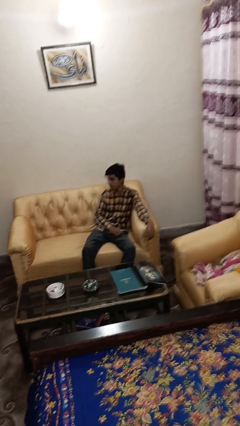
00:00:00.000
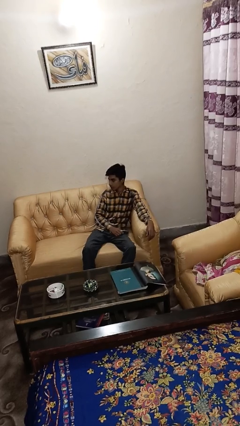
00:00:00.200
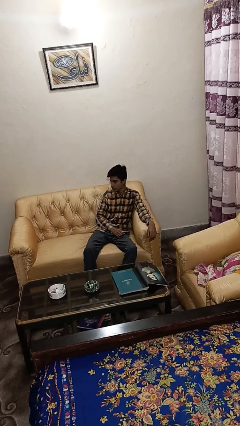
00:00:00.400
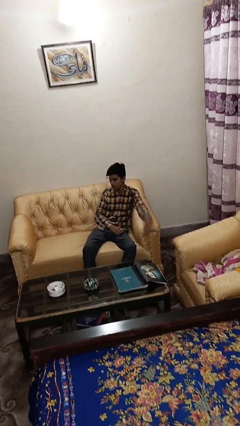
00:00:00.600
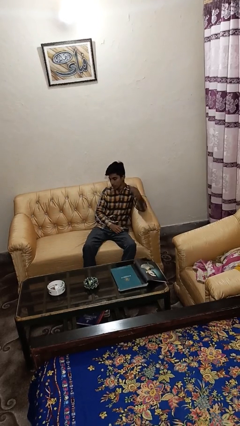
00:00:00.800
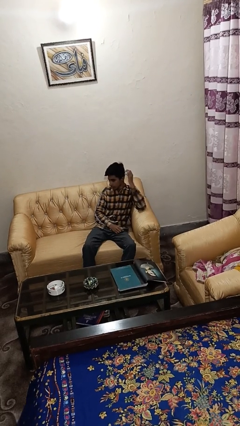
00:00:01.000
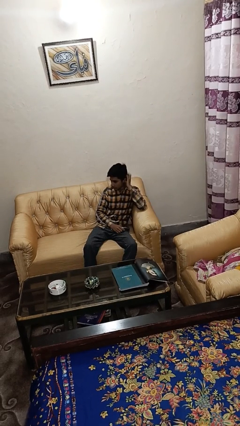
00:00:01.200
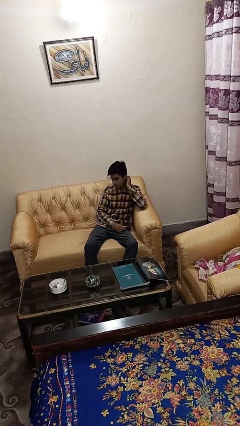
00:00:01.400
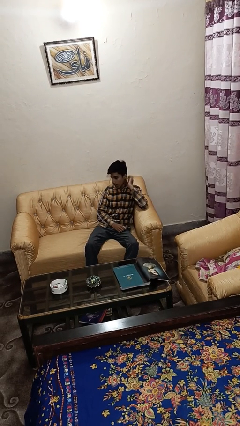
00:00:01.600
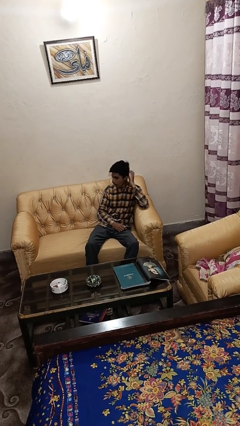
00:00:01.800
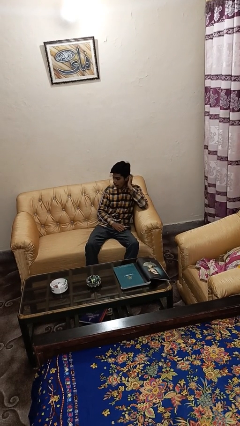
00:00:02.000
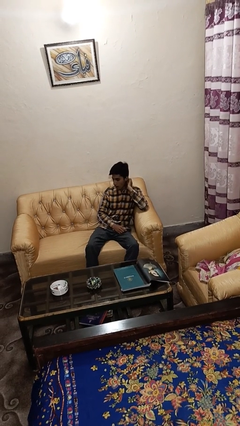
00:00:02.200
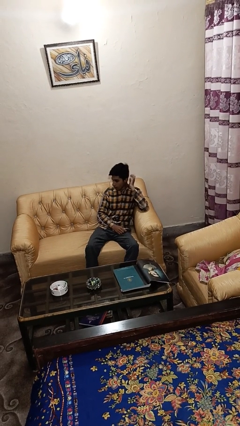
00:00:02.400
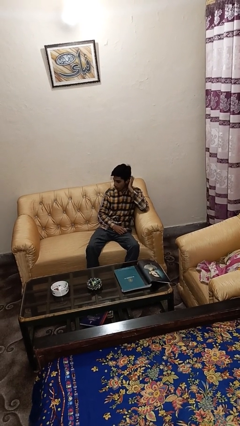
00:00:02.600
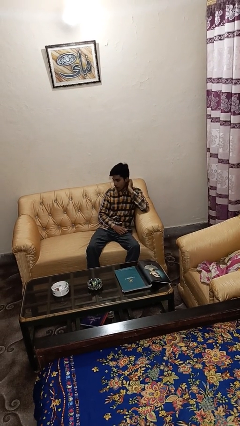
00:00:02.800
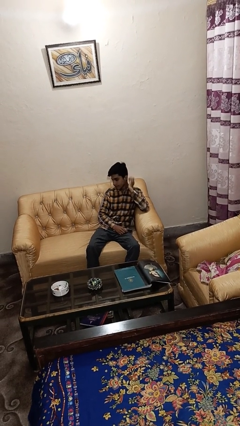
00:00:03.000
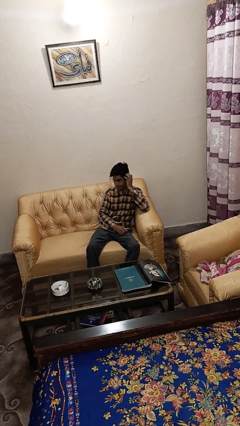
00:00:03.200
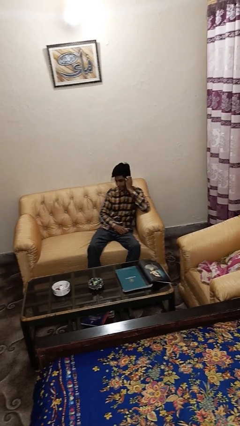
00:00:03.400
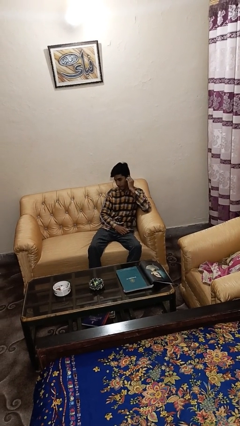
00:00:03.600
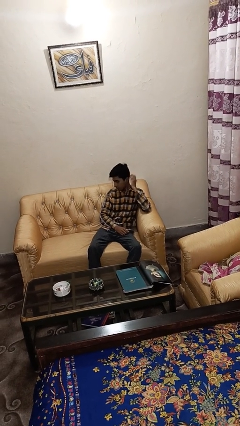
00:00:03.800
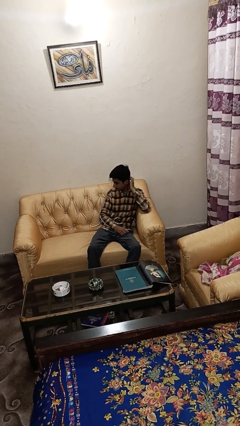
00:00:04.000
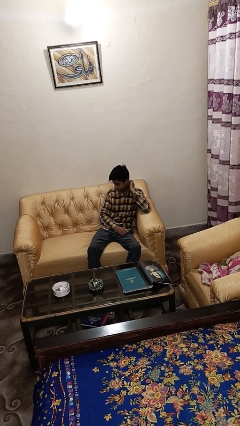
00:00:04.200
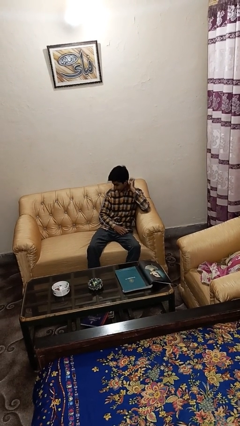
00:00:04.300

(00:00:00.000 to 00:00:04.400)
person strokes hair

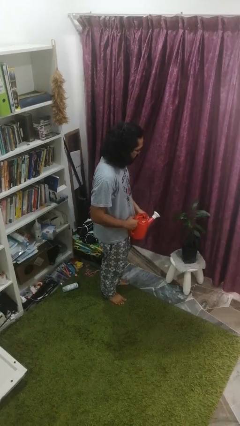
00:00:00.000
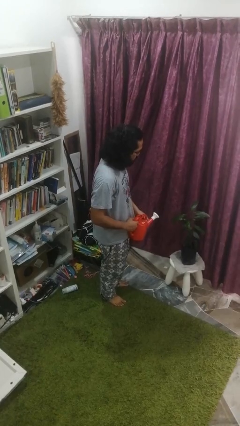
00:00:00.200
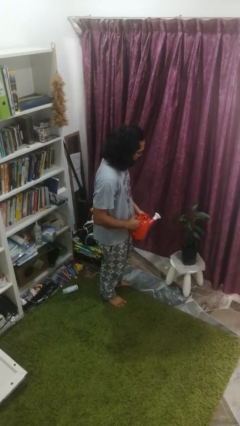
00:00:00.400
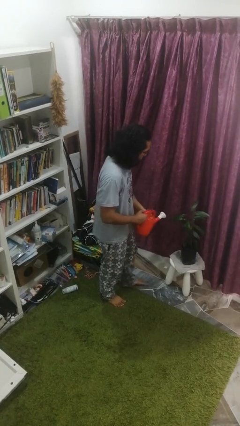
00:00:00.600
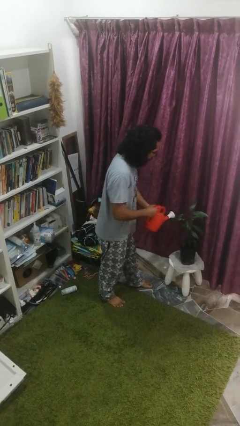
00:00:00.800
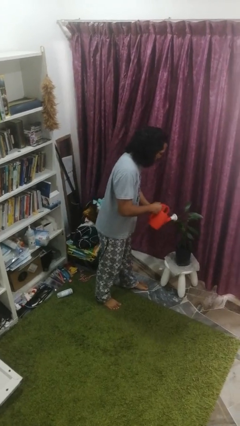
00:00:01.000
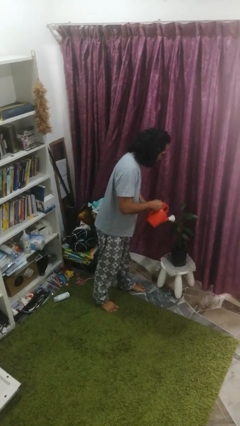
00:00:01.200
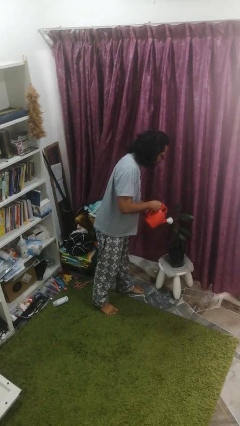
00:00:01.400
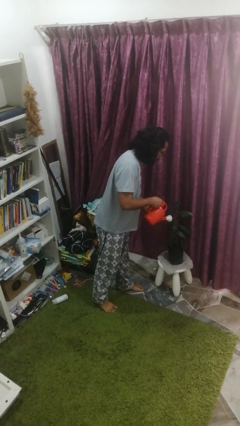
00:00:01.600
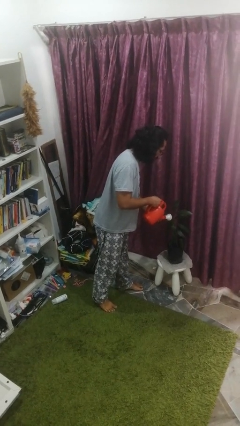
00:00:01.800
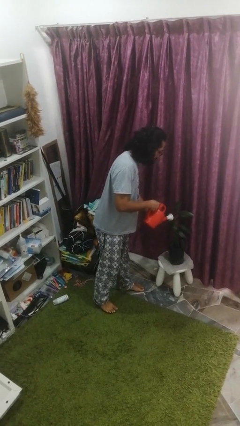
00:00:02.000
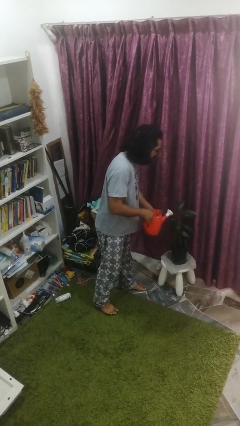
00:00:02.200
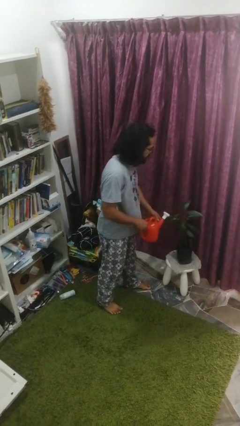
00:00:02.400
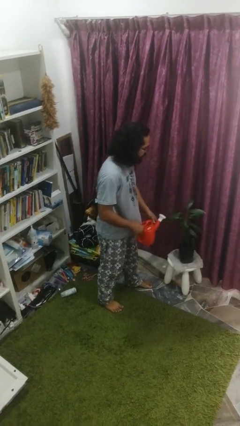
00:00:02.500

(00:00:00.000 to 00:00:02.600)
person waters houseplant

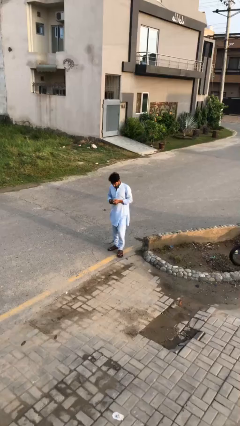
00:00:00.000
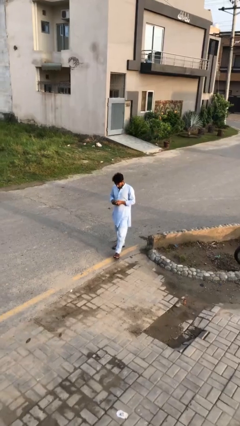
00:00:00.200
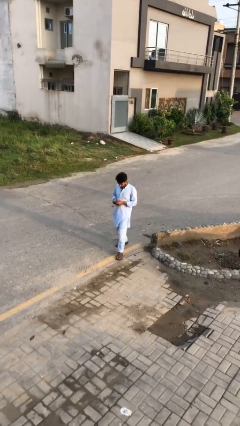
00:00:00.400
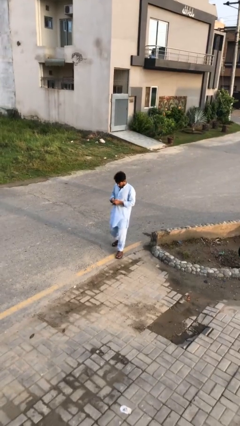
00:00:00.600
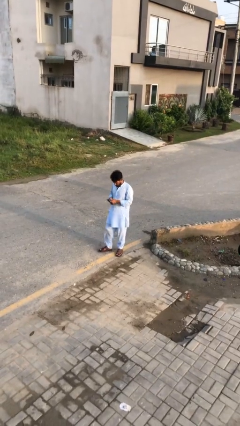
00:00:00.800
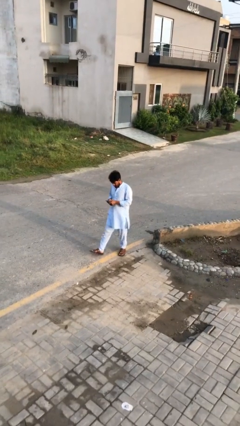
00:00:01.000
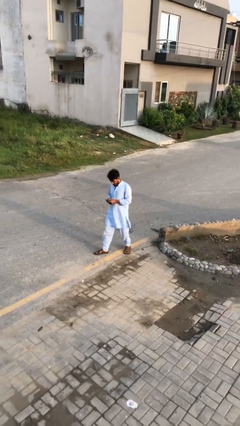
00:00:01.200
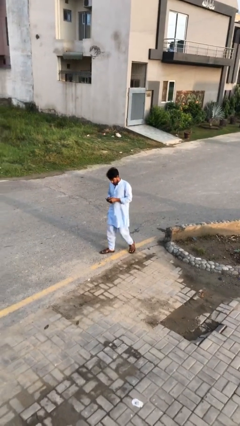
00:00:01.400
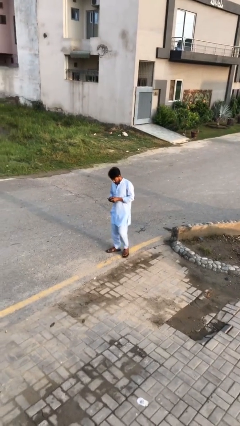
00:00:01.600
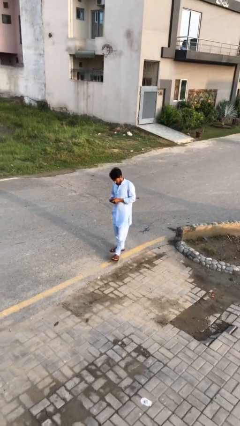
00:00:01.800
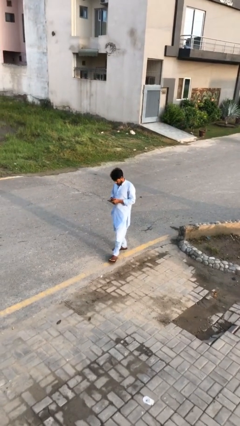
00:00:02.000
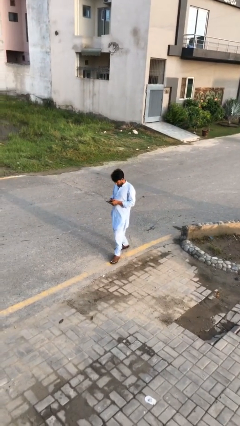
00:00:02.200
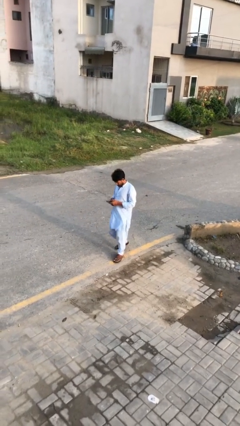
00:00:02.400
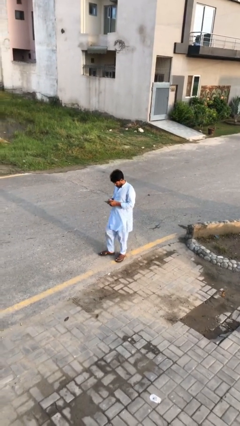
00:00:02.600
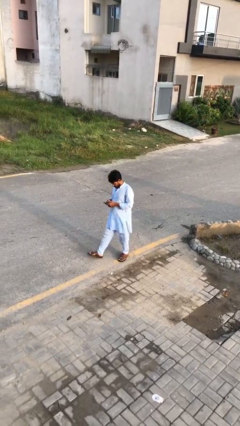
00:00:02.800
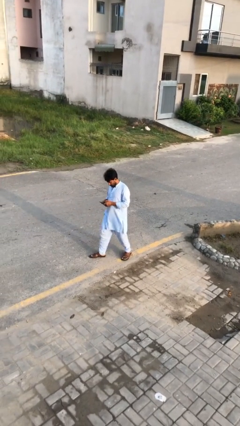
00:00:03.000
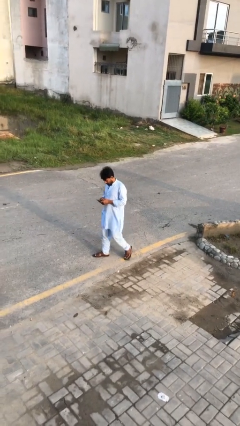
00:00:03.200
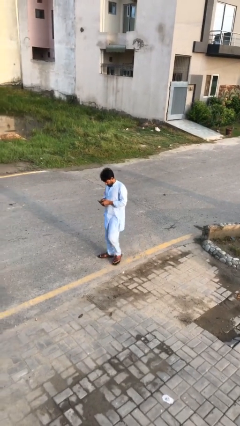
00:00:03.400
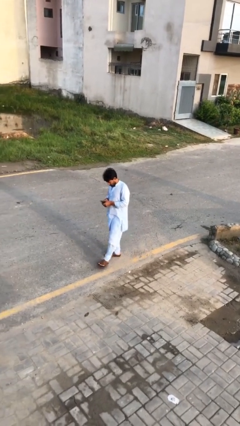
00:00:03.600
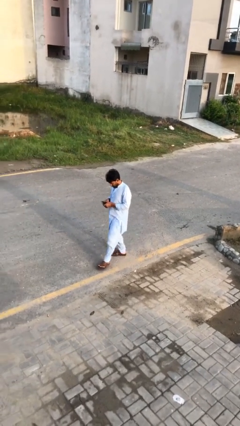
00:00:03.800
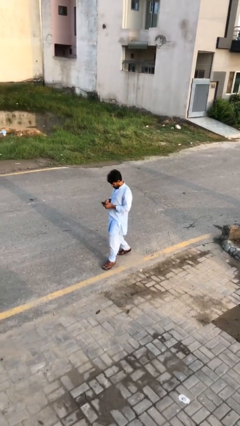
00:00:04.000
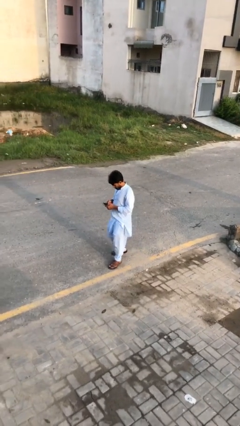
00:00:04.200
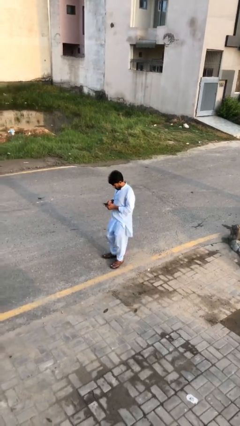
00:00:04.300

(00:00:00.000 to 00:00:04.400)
person texts on phone

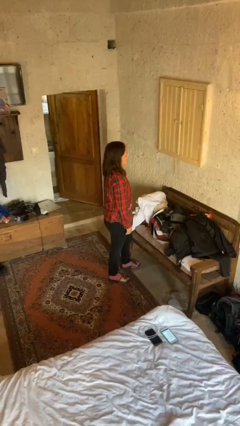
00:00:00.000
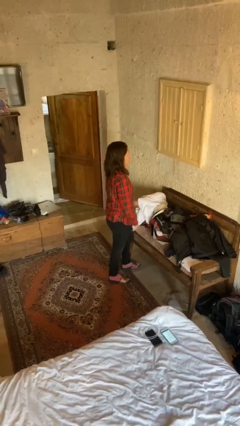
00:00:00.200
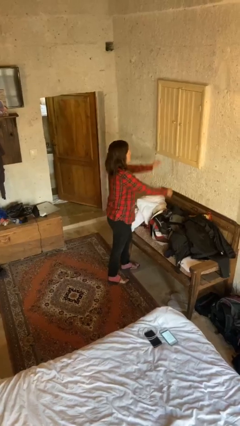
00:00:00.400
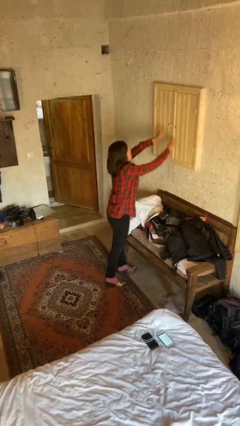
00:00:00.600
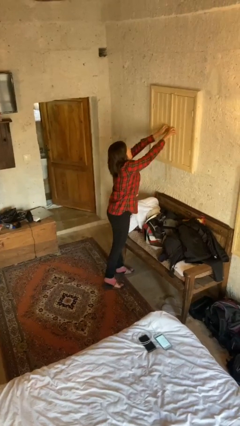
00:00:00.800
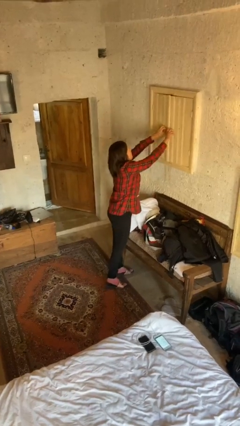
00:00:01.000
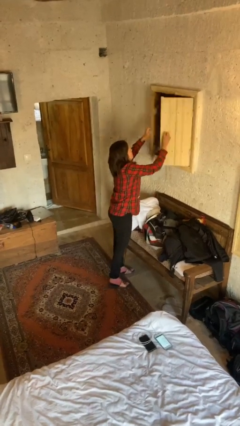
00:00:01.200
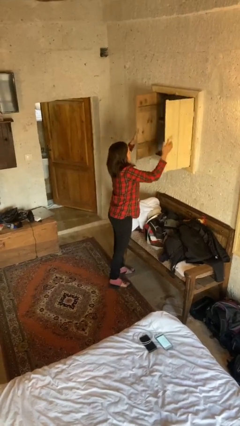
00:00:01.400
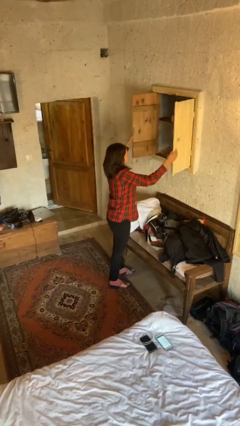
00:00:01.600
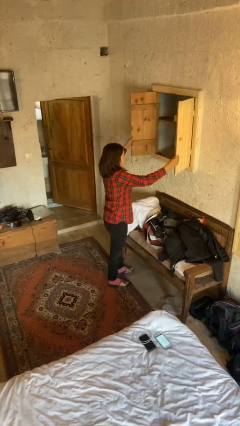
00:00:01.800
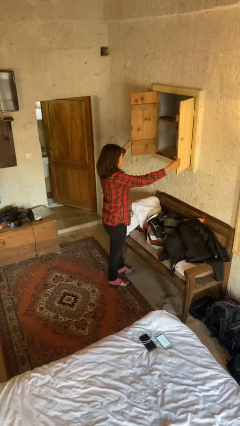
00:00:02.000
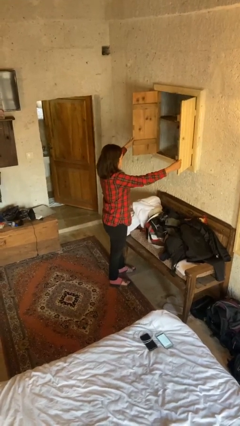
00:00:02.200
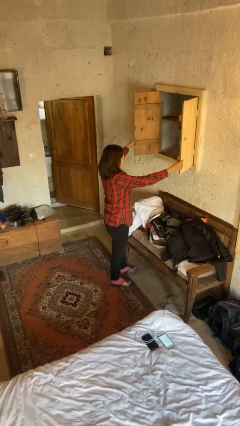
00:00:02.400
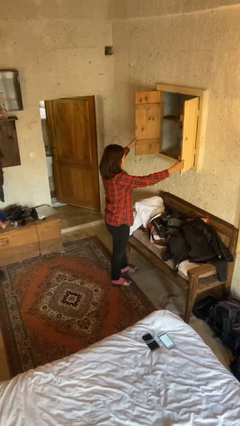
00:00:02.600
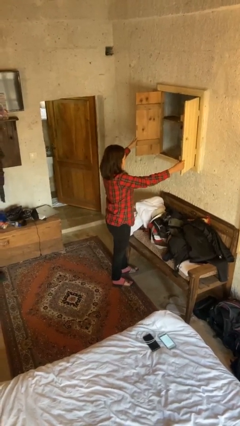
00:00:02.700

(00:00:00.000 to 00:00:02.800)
person opens closet door

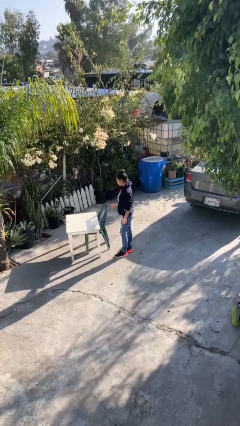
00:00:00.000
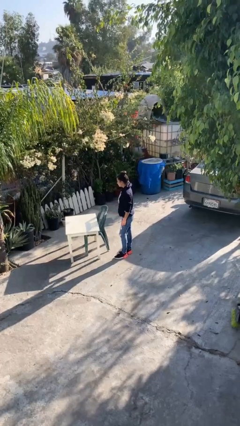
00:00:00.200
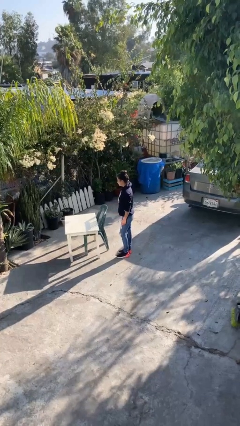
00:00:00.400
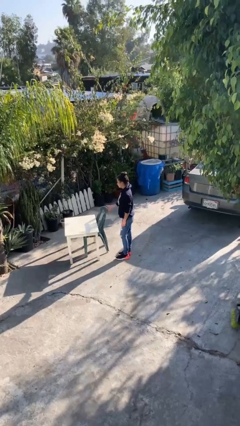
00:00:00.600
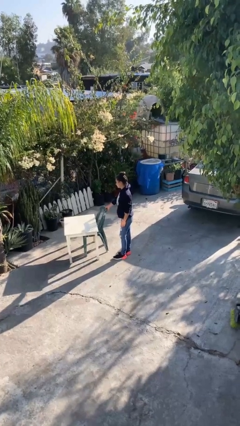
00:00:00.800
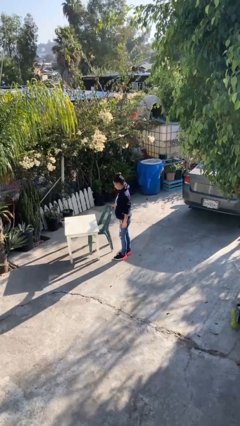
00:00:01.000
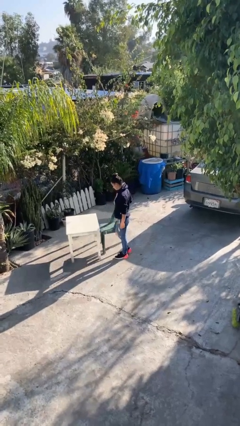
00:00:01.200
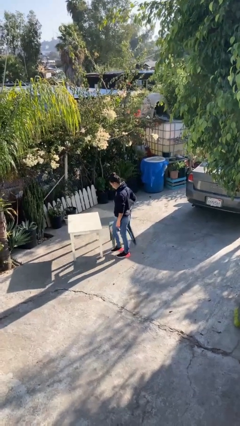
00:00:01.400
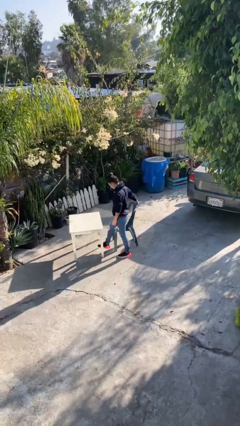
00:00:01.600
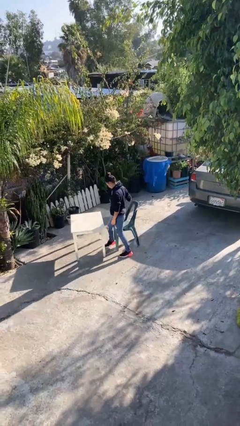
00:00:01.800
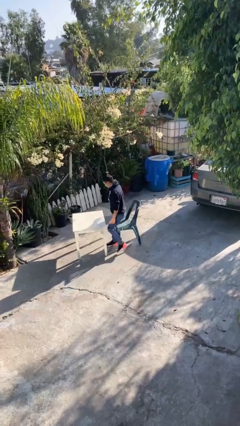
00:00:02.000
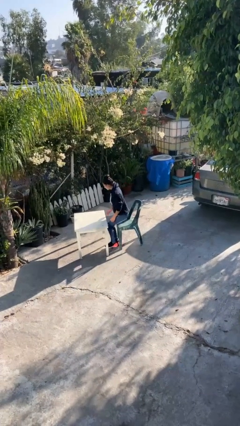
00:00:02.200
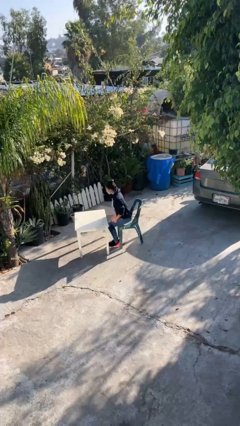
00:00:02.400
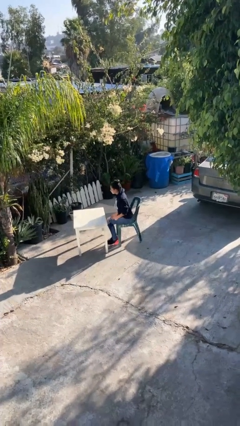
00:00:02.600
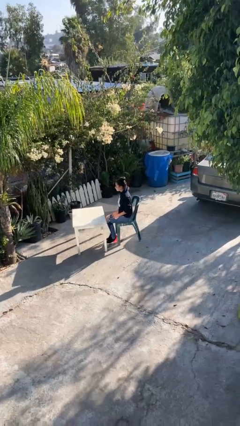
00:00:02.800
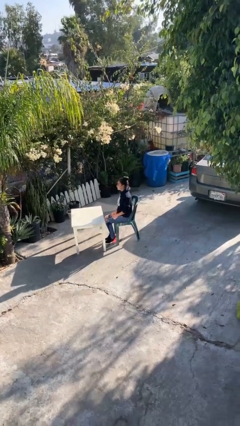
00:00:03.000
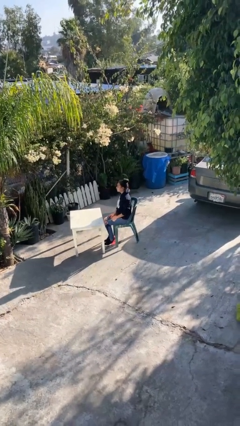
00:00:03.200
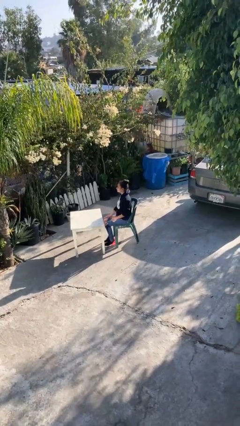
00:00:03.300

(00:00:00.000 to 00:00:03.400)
person sits down
